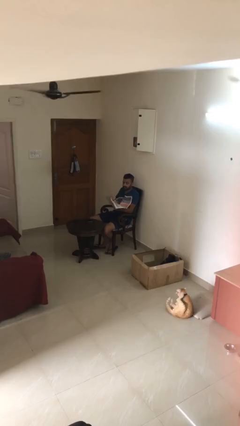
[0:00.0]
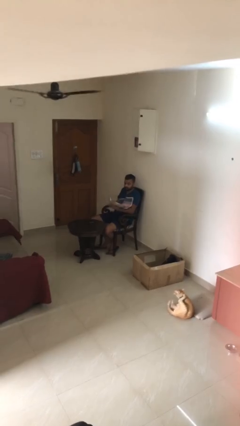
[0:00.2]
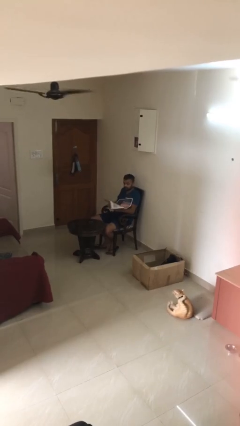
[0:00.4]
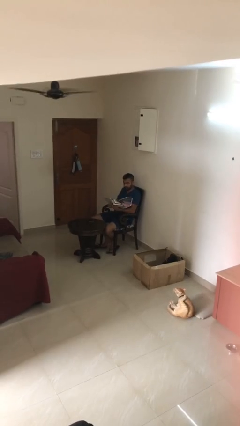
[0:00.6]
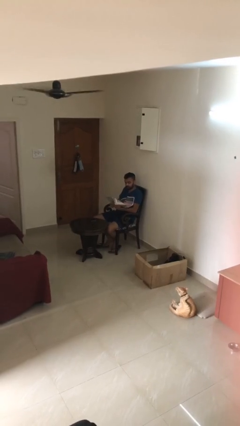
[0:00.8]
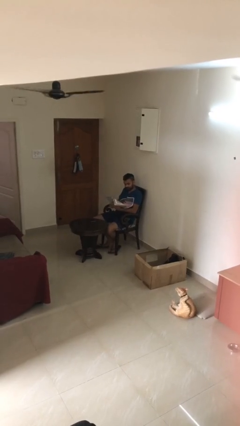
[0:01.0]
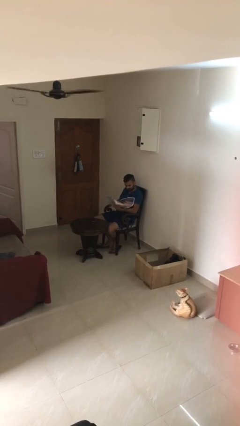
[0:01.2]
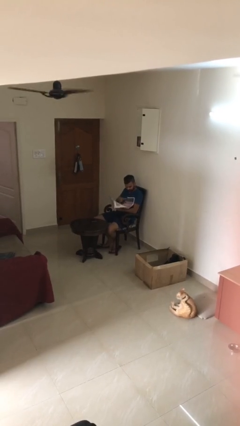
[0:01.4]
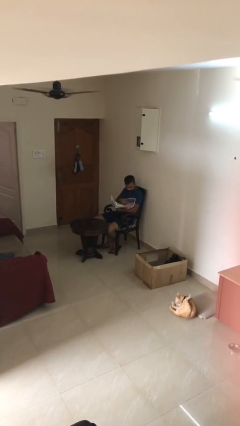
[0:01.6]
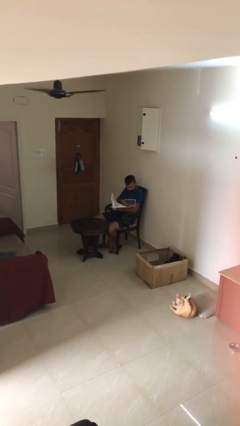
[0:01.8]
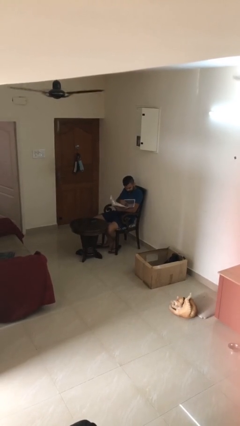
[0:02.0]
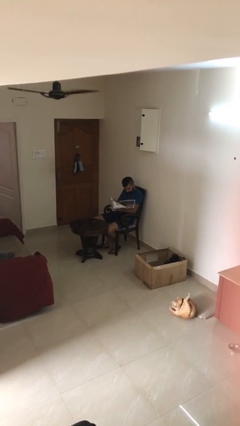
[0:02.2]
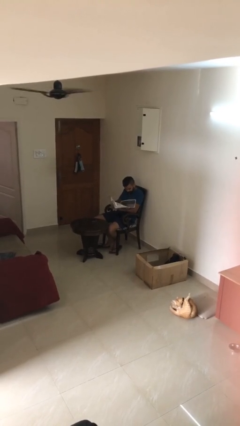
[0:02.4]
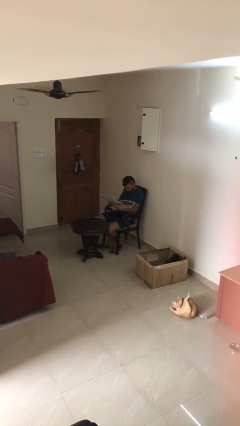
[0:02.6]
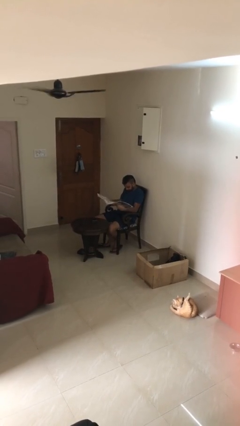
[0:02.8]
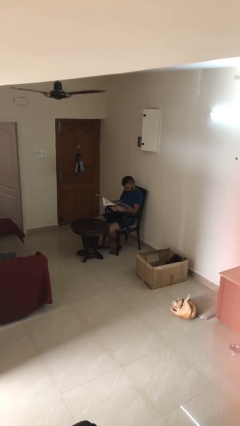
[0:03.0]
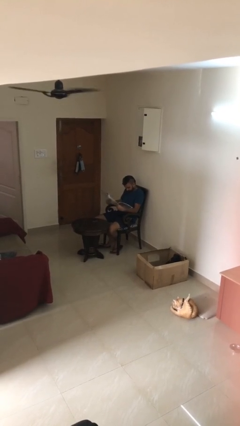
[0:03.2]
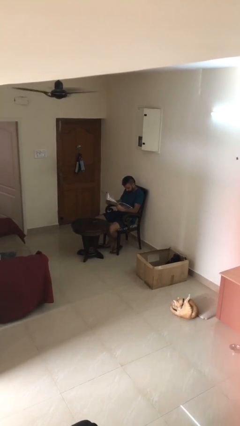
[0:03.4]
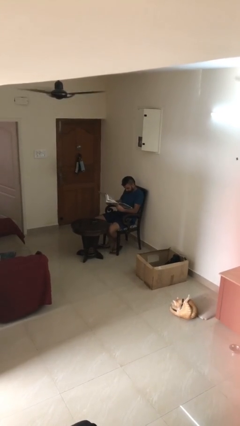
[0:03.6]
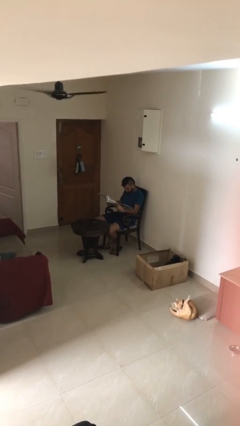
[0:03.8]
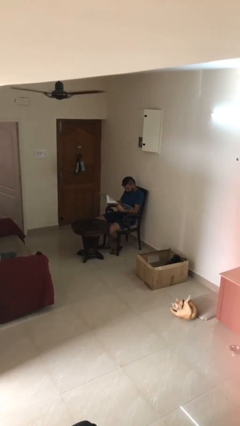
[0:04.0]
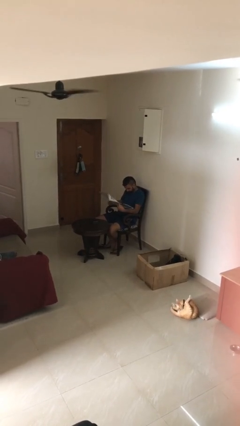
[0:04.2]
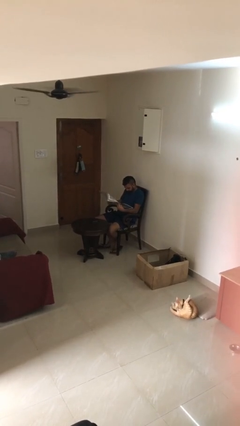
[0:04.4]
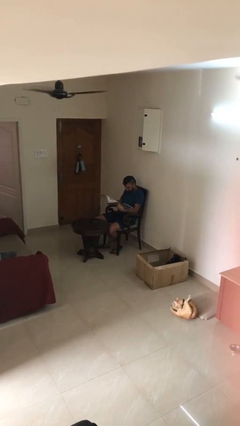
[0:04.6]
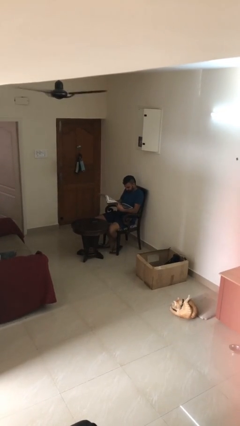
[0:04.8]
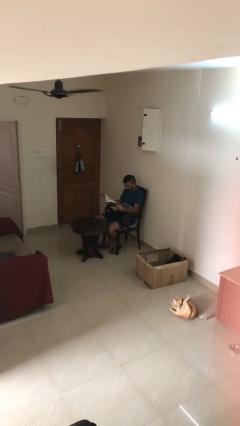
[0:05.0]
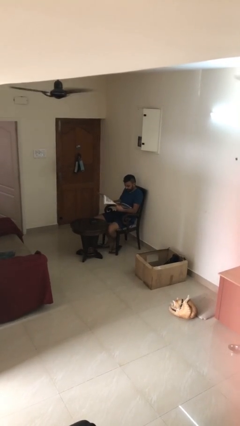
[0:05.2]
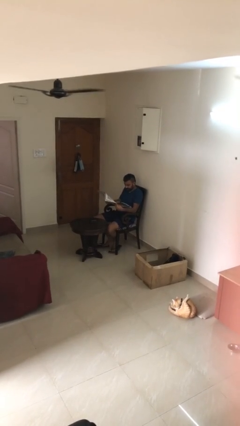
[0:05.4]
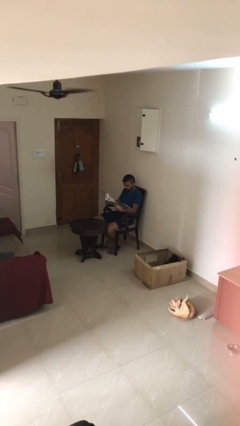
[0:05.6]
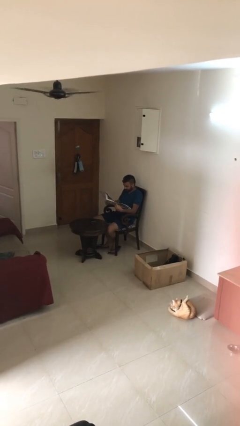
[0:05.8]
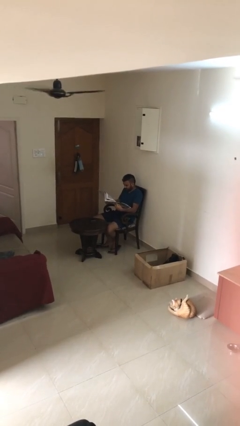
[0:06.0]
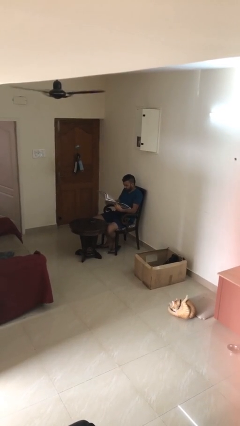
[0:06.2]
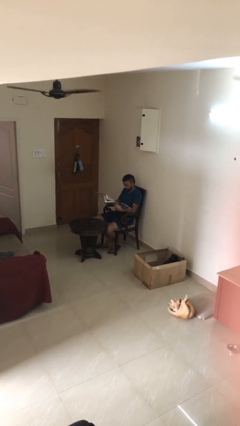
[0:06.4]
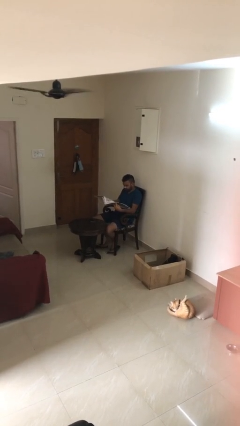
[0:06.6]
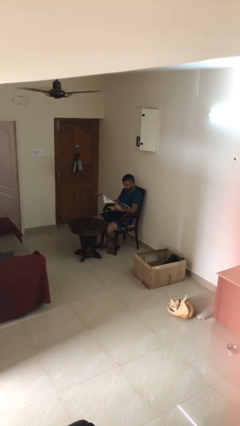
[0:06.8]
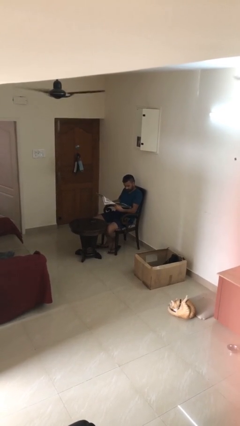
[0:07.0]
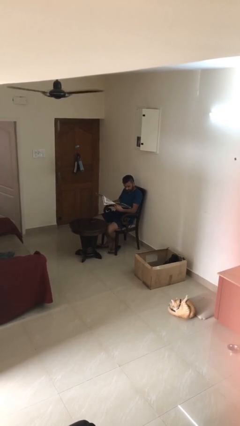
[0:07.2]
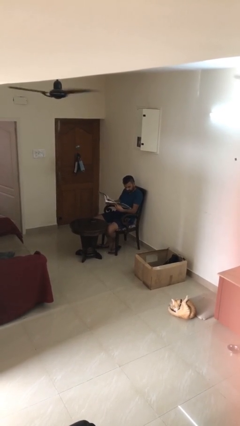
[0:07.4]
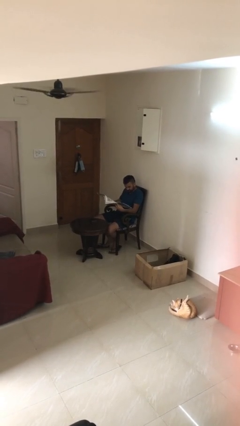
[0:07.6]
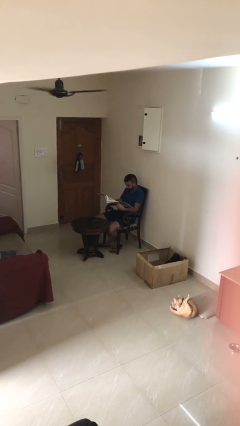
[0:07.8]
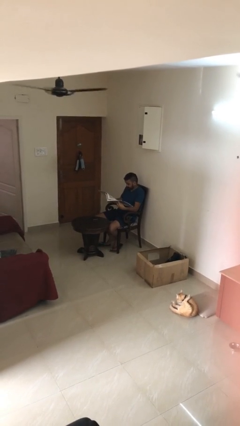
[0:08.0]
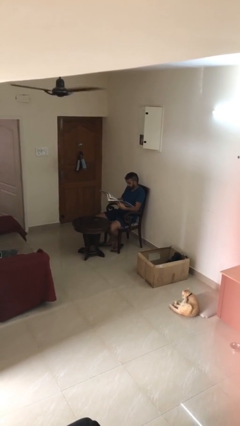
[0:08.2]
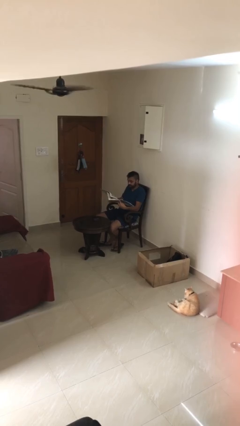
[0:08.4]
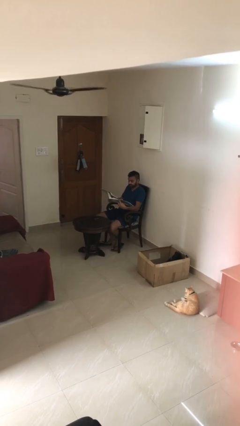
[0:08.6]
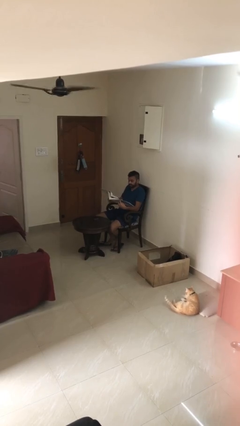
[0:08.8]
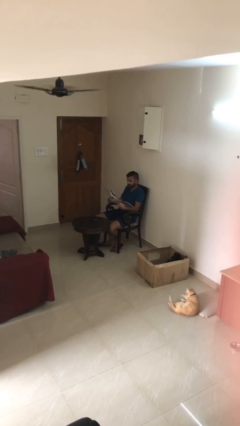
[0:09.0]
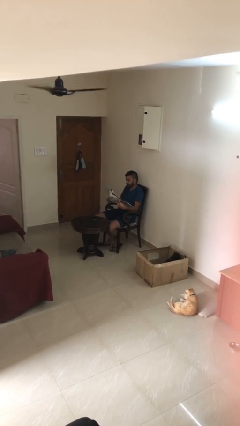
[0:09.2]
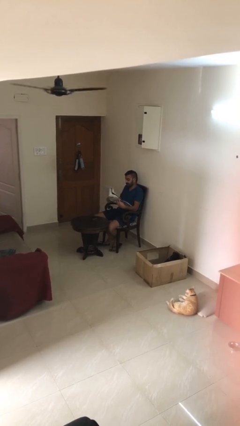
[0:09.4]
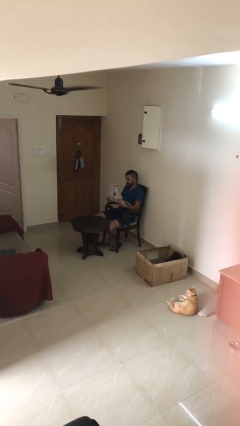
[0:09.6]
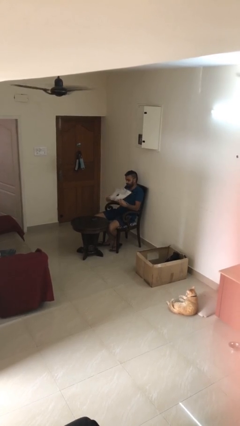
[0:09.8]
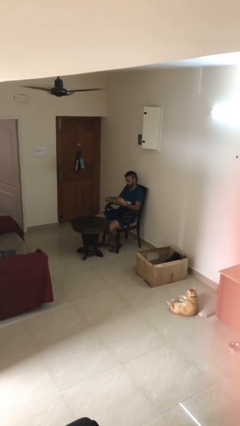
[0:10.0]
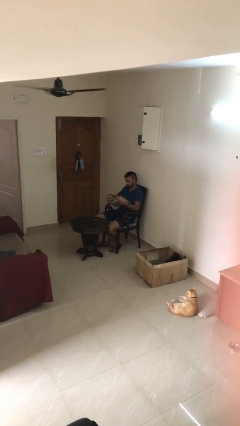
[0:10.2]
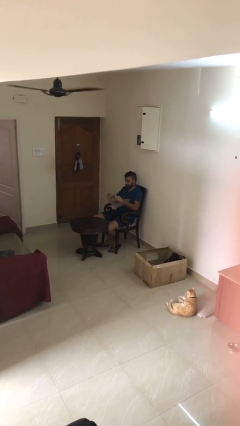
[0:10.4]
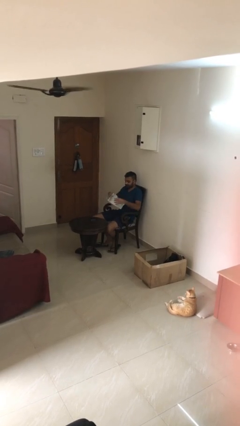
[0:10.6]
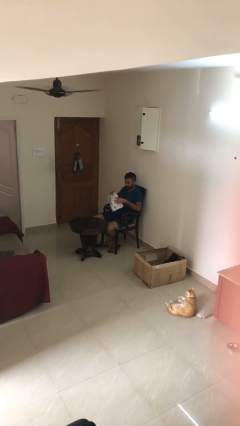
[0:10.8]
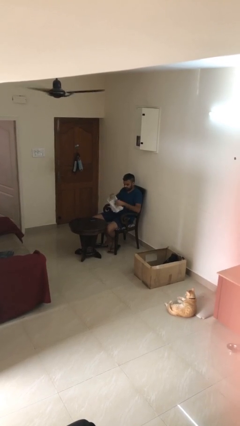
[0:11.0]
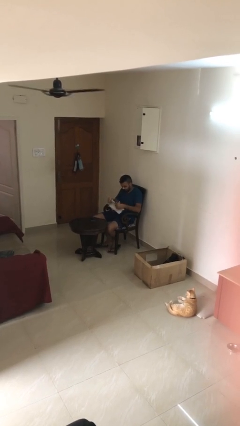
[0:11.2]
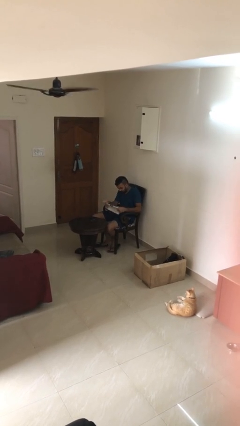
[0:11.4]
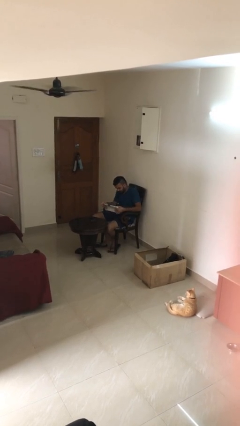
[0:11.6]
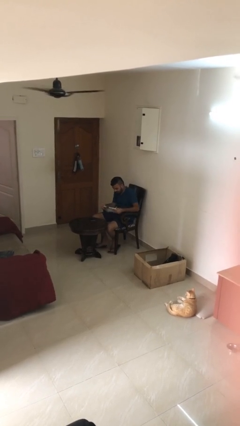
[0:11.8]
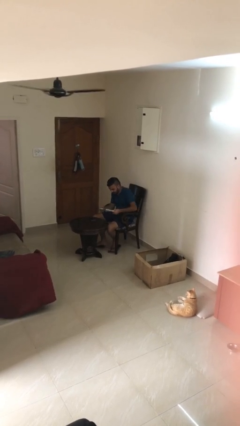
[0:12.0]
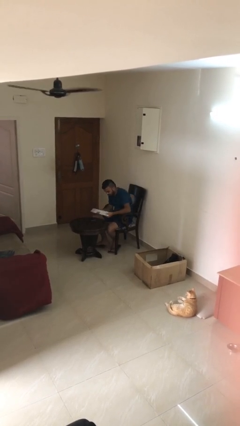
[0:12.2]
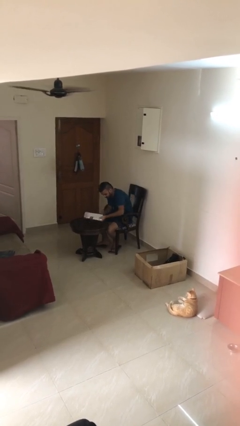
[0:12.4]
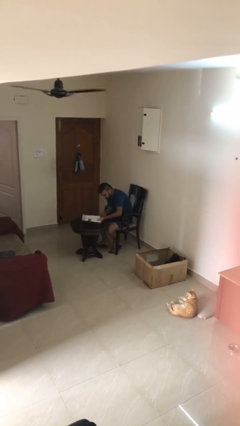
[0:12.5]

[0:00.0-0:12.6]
person reads document

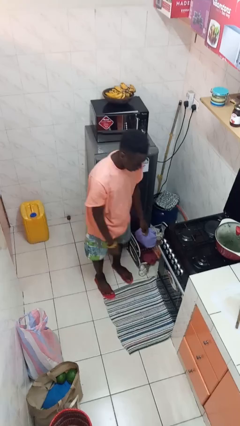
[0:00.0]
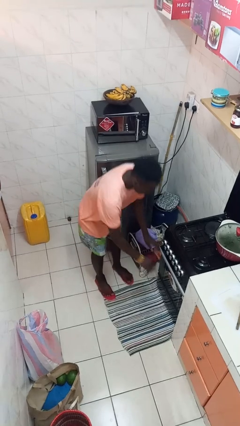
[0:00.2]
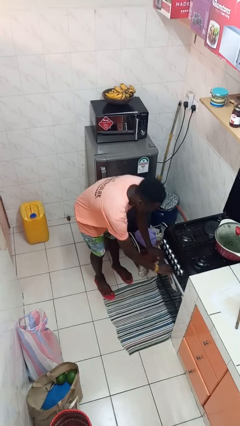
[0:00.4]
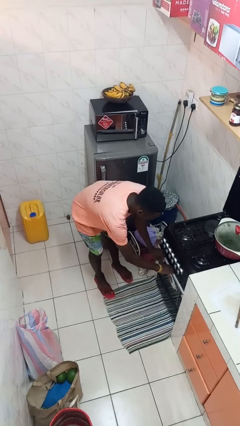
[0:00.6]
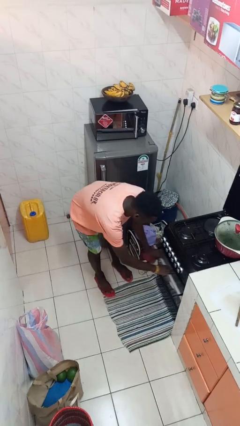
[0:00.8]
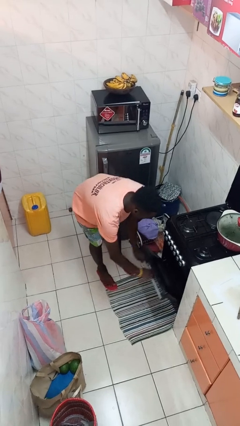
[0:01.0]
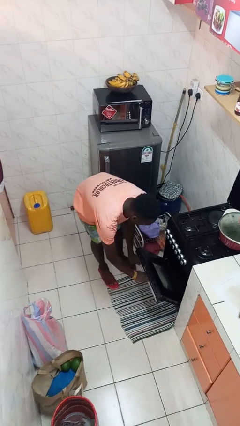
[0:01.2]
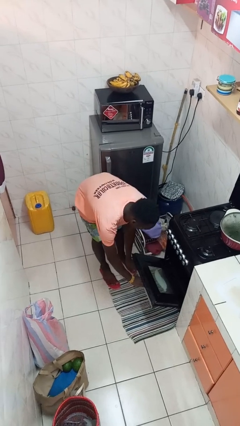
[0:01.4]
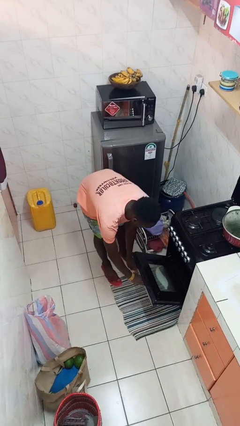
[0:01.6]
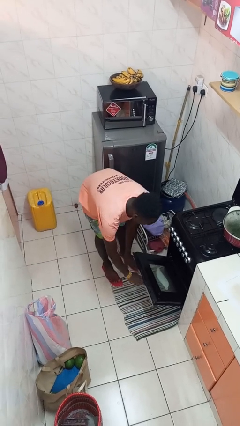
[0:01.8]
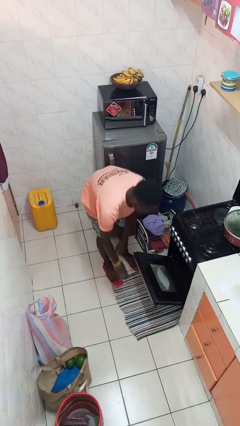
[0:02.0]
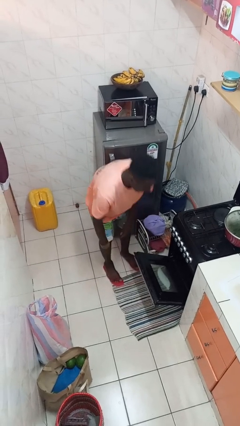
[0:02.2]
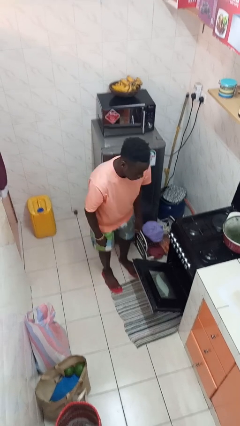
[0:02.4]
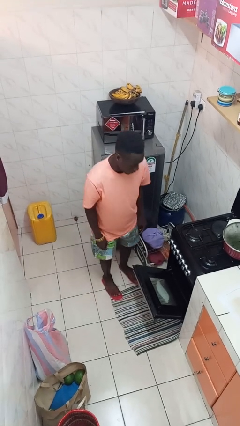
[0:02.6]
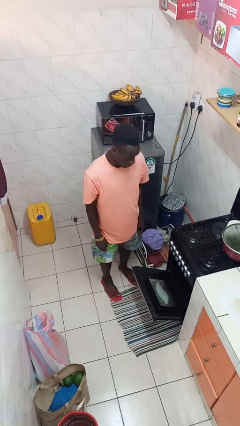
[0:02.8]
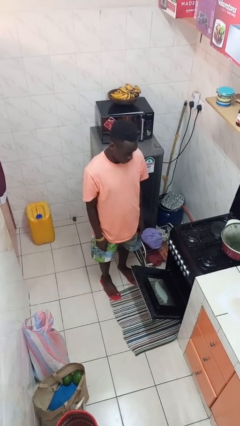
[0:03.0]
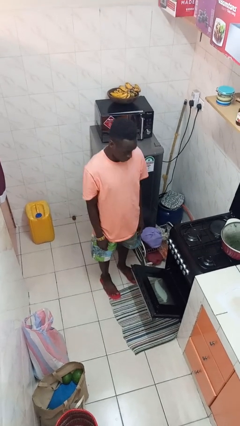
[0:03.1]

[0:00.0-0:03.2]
person opens oven door

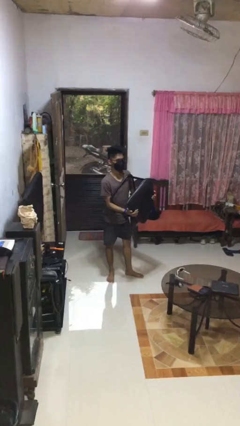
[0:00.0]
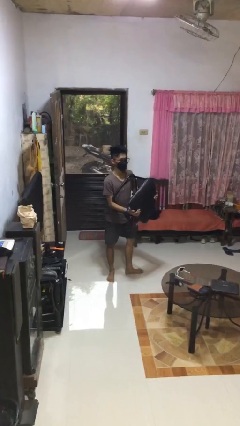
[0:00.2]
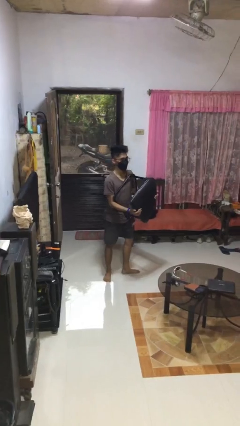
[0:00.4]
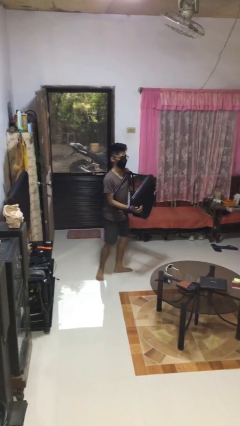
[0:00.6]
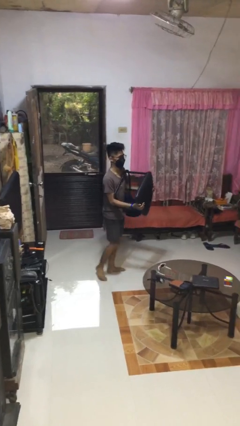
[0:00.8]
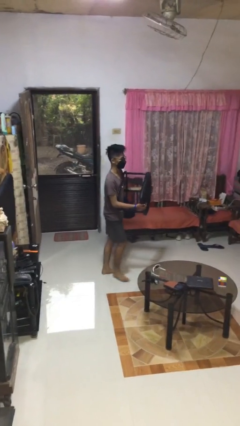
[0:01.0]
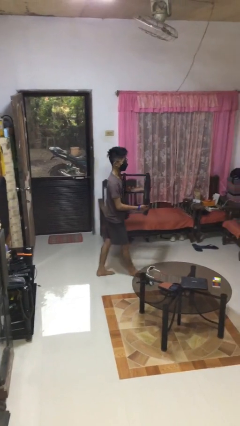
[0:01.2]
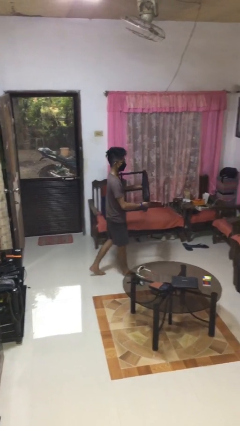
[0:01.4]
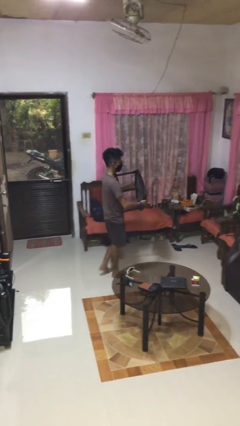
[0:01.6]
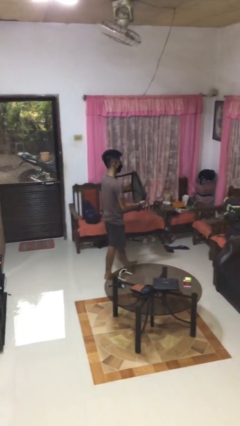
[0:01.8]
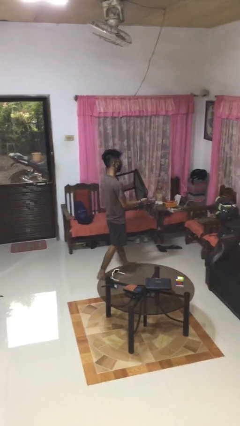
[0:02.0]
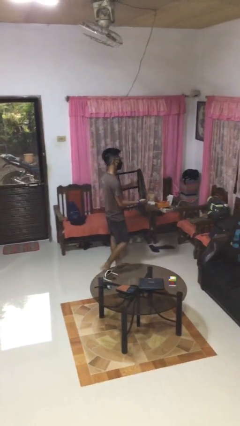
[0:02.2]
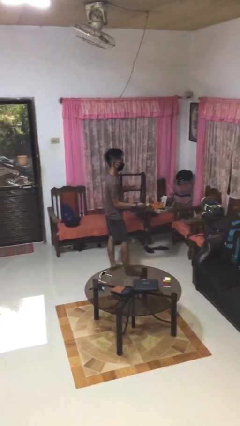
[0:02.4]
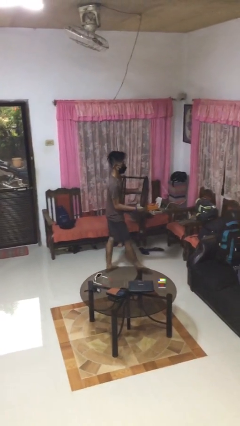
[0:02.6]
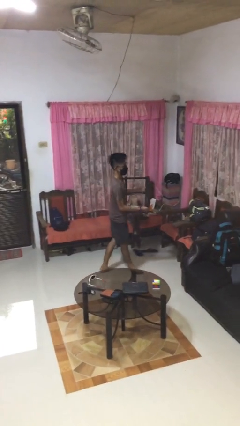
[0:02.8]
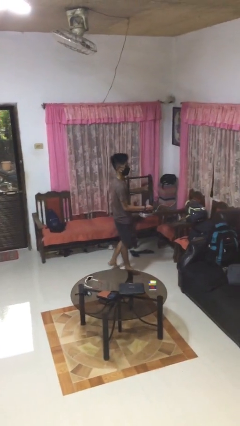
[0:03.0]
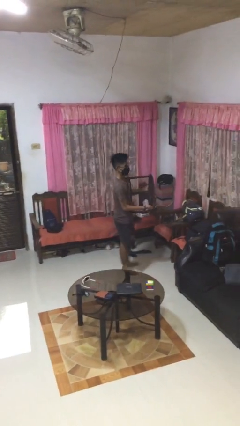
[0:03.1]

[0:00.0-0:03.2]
person carries furniture
